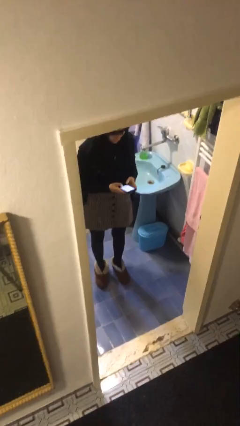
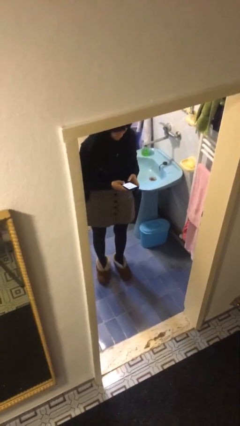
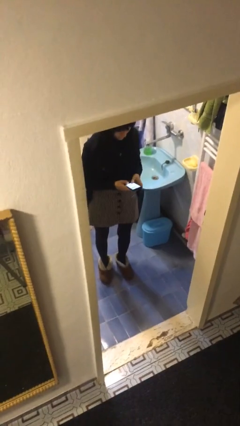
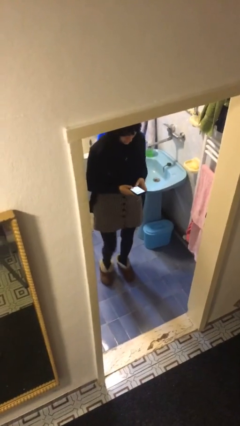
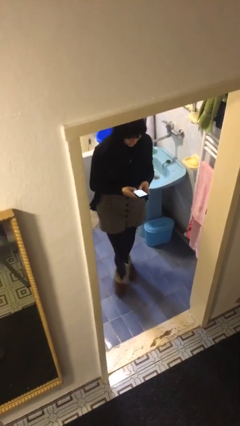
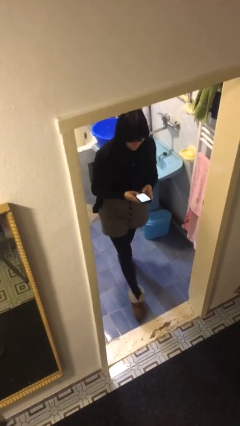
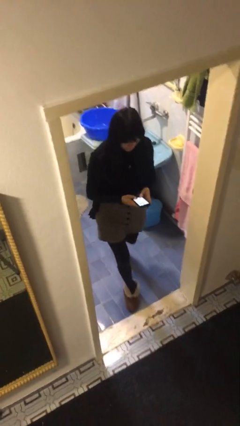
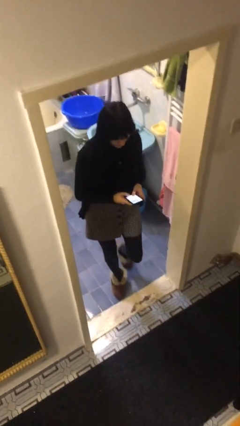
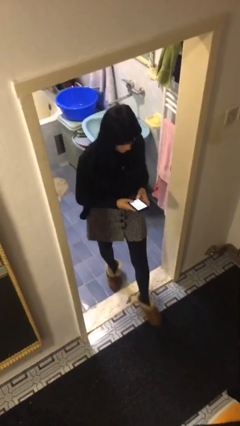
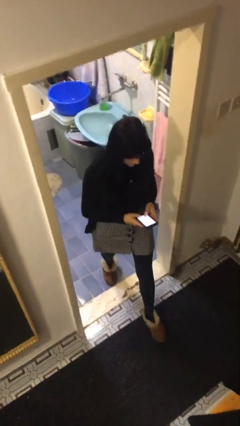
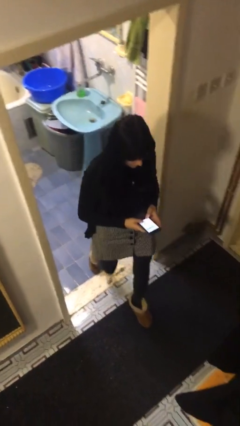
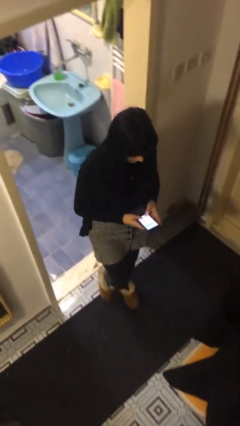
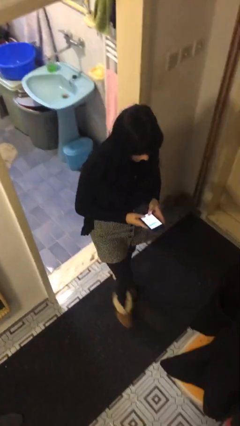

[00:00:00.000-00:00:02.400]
person enters scene through structure

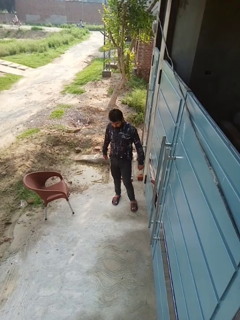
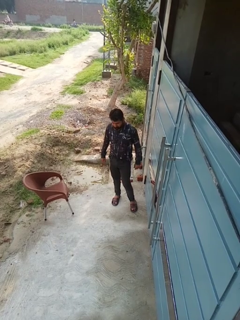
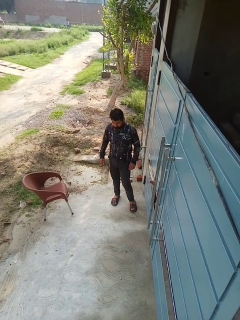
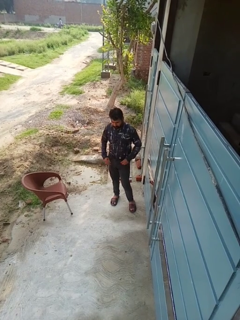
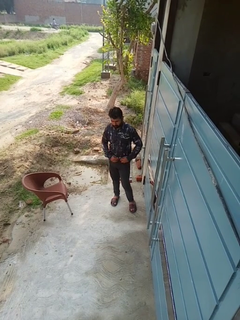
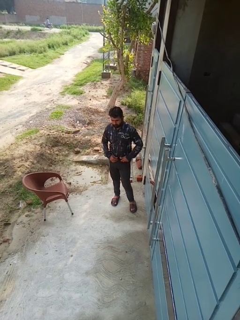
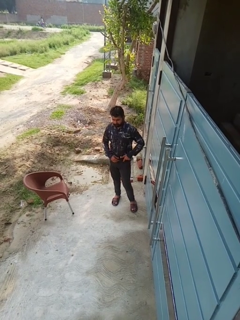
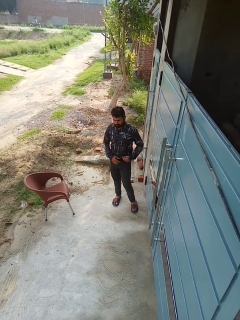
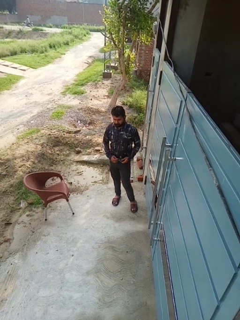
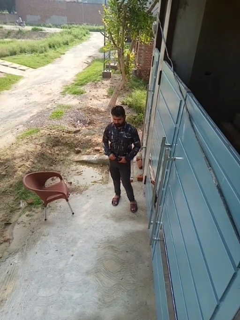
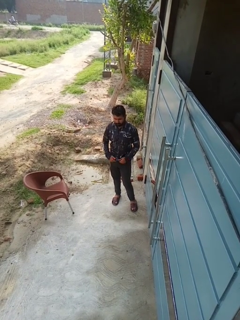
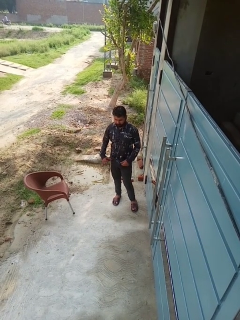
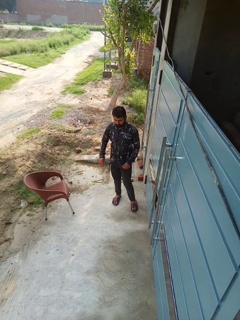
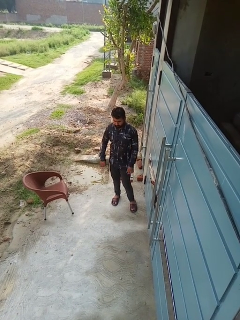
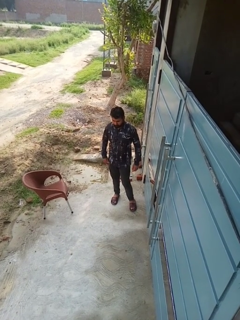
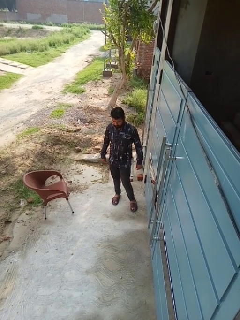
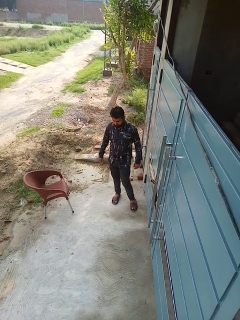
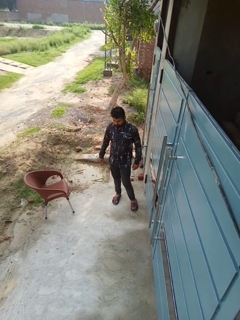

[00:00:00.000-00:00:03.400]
person untucks shirt

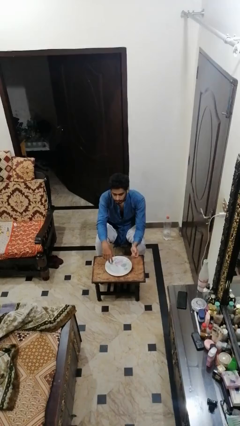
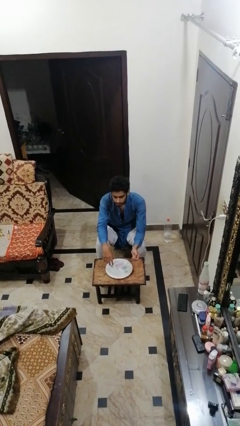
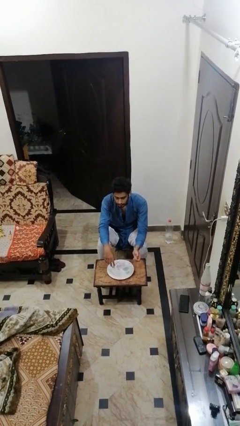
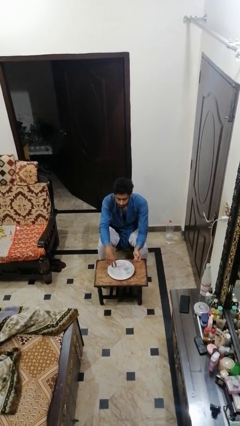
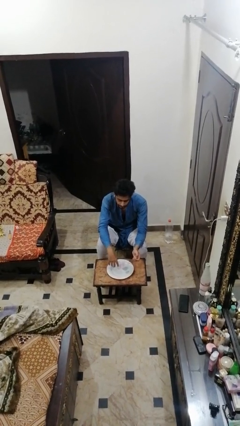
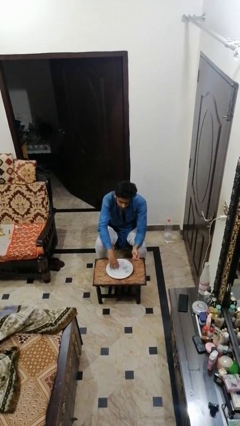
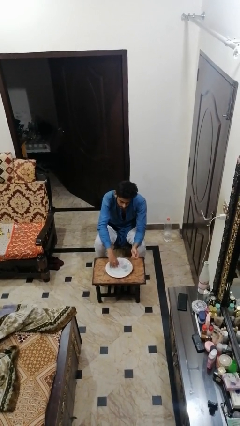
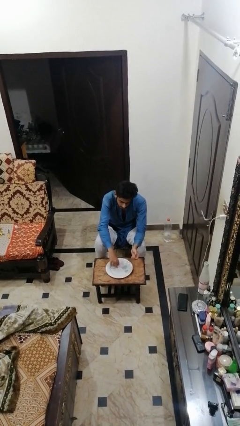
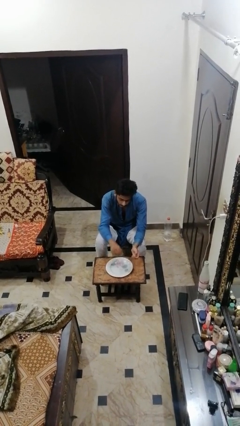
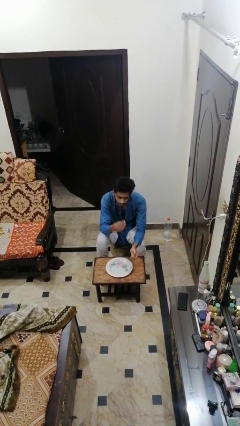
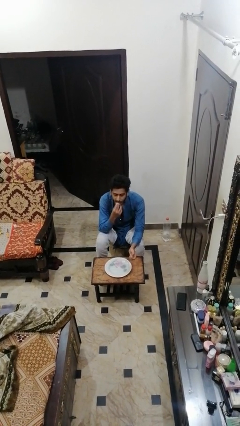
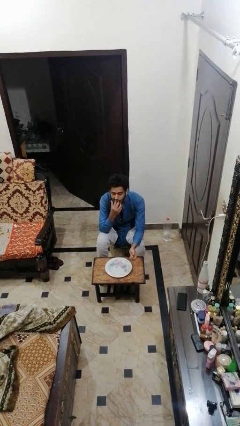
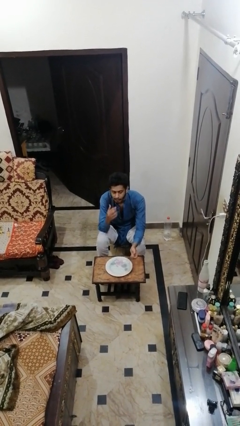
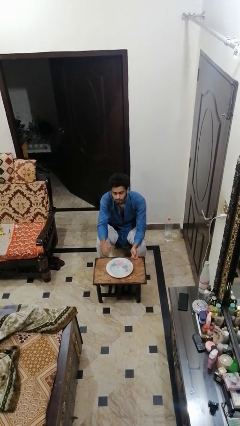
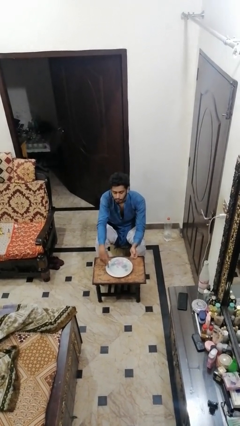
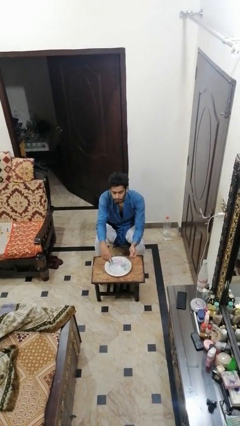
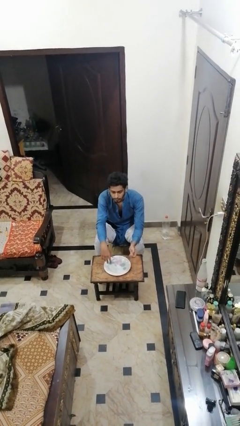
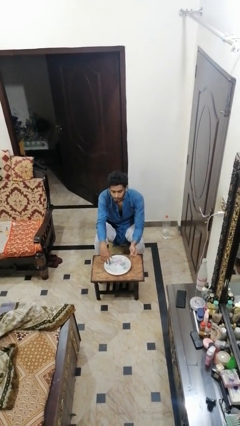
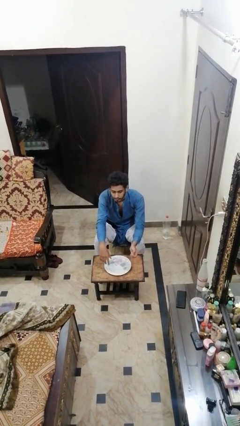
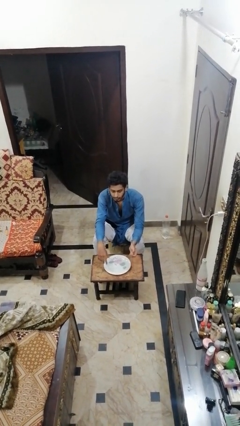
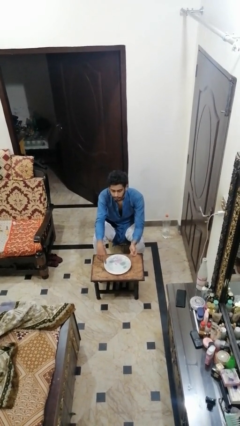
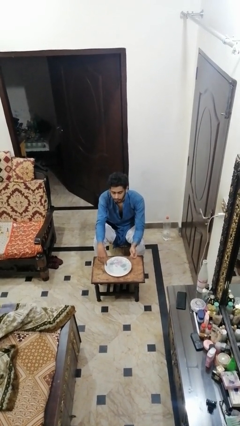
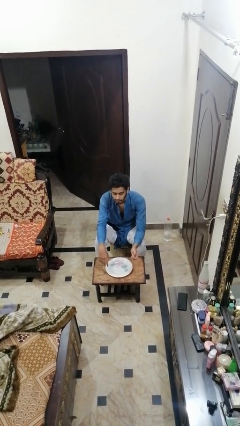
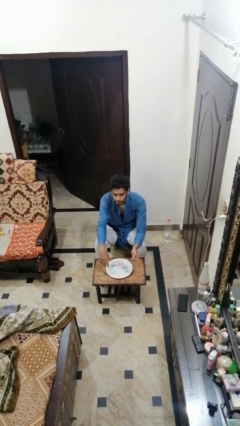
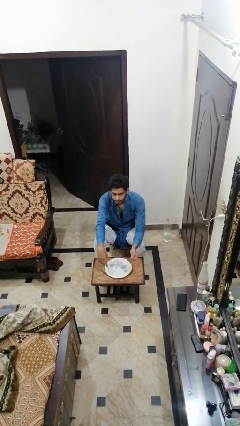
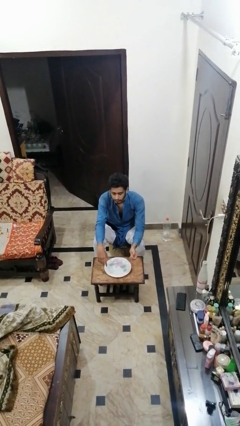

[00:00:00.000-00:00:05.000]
person eats with hands

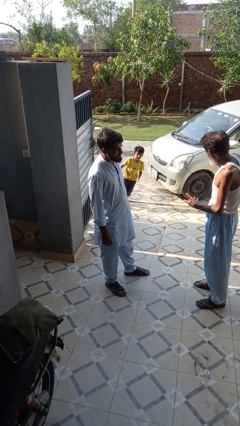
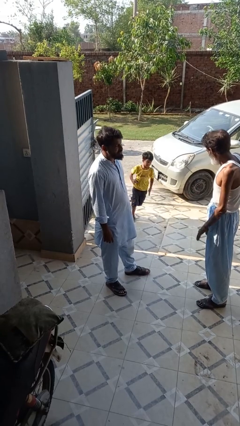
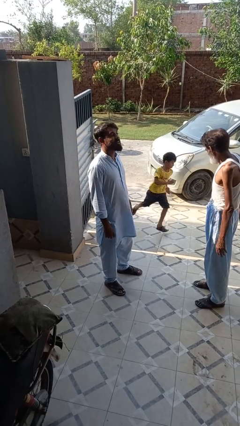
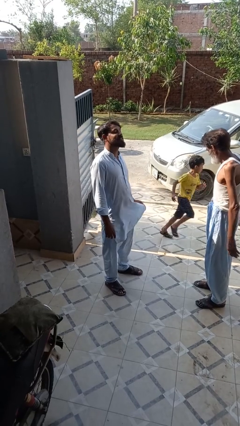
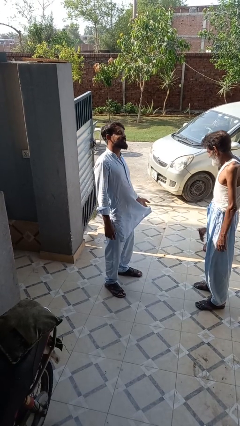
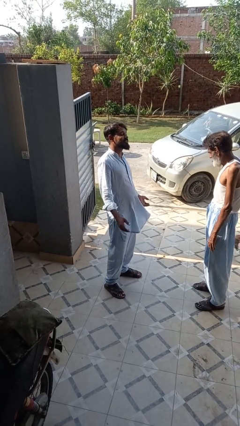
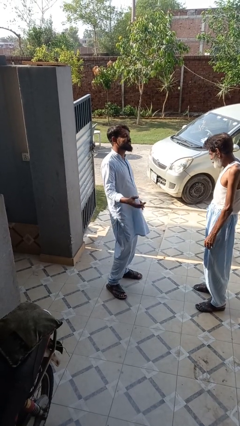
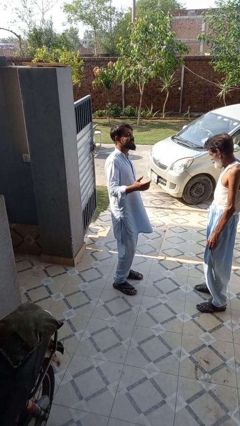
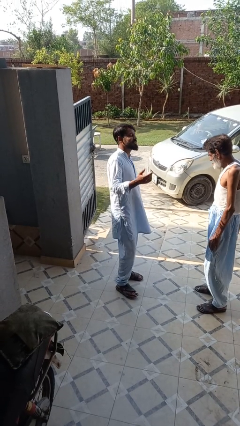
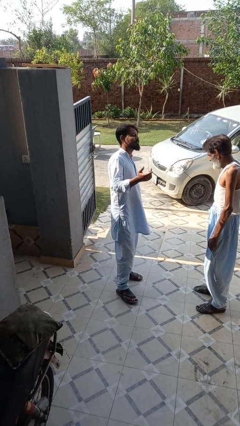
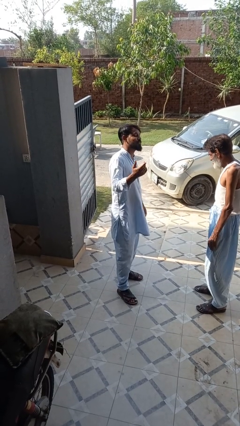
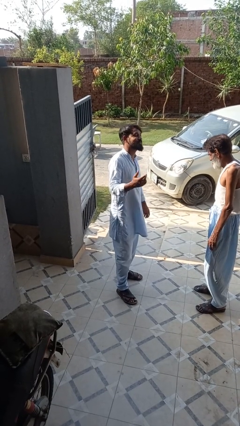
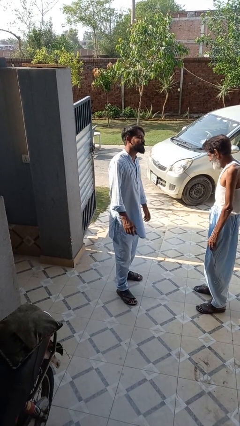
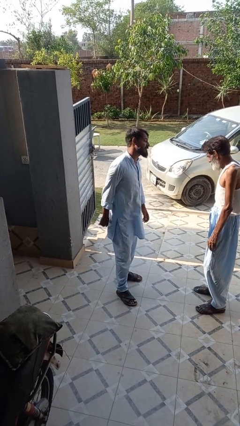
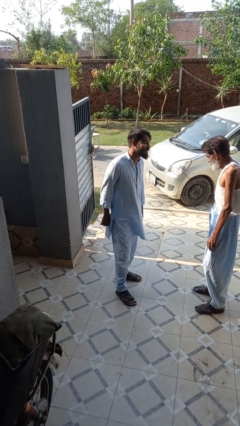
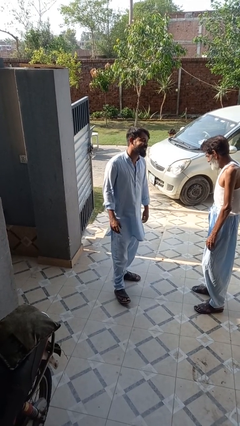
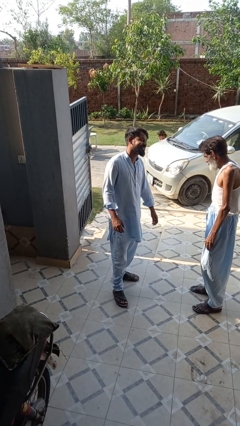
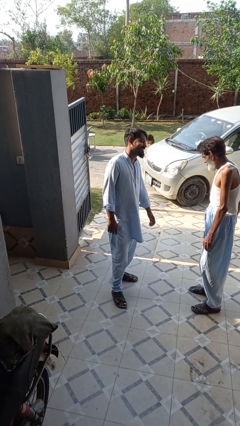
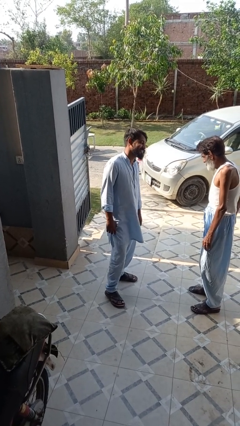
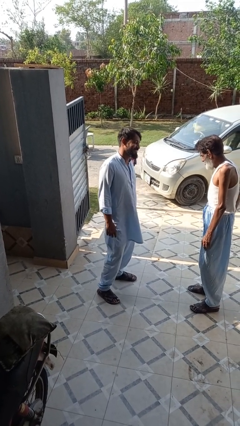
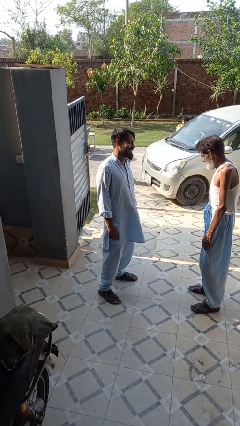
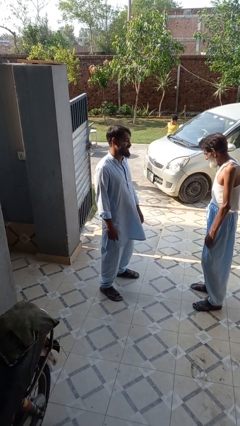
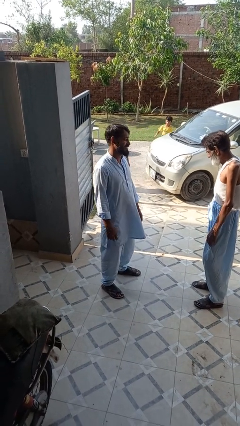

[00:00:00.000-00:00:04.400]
person laughs with person

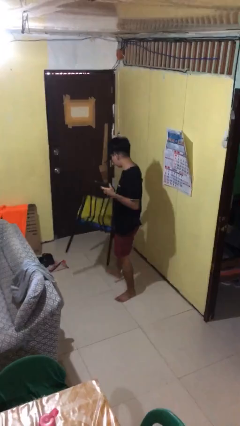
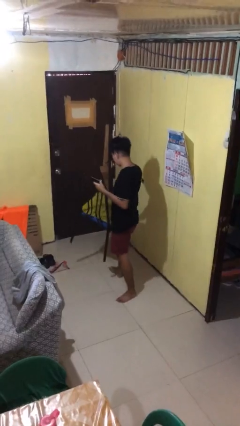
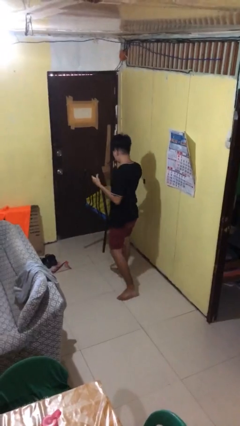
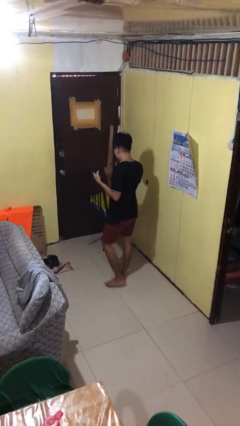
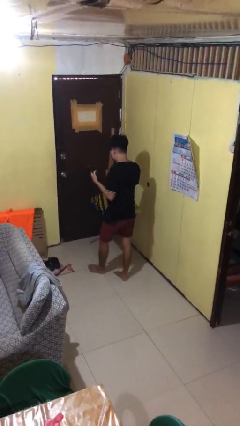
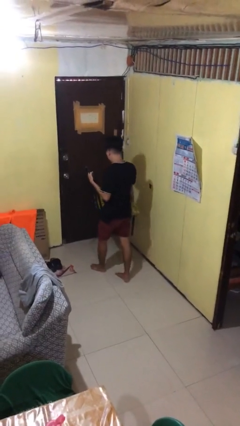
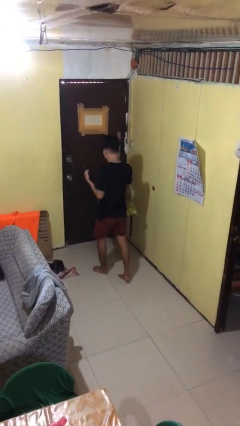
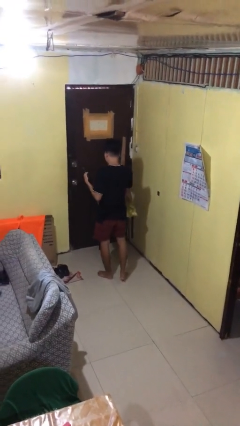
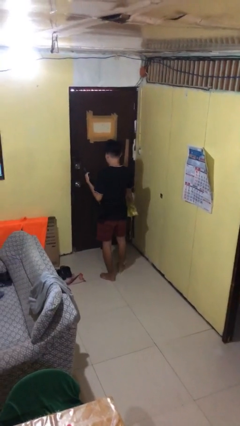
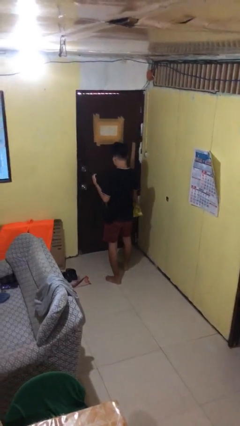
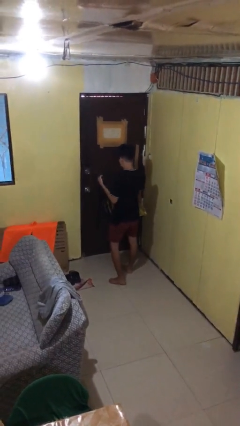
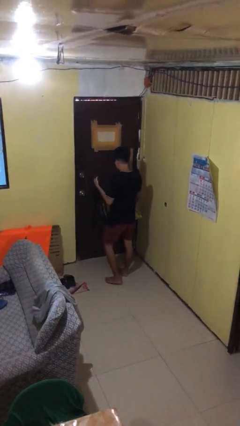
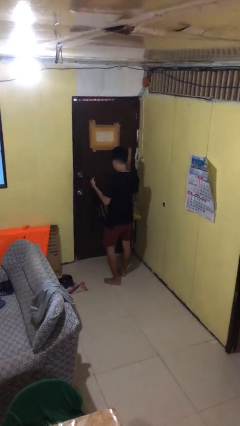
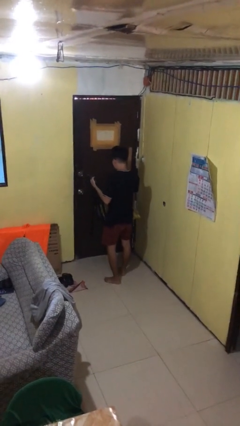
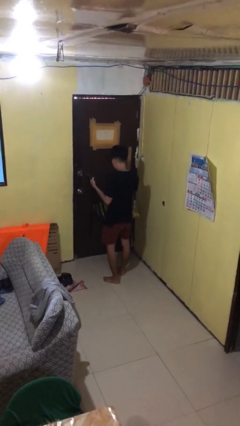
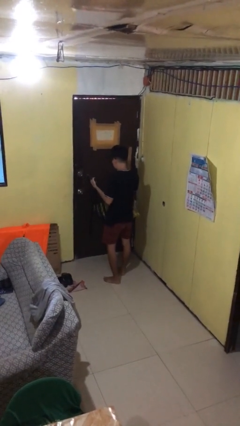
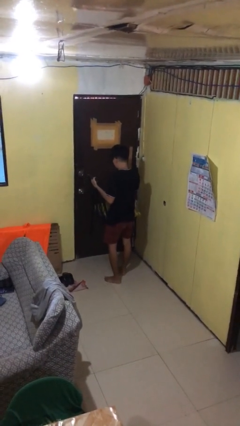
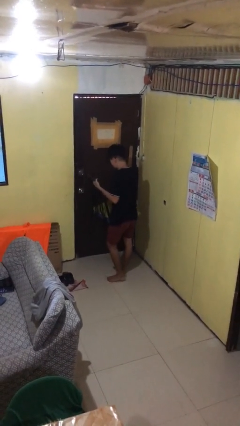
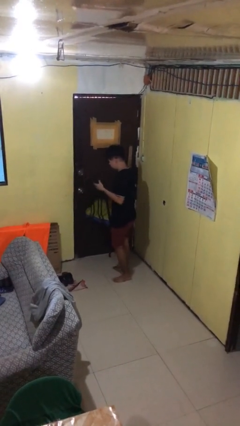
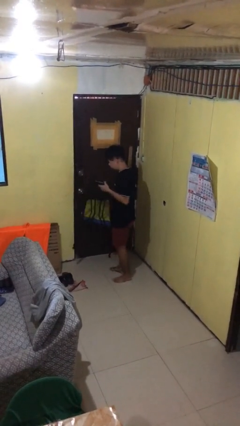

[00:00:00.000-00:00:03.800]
person carries furniture
